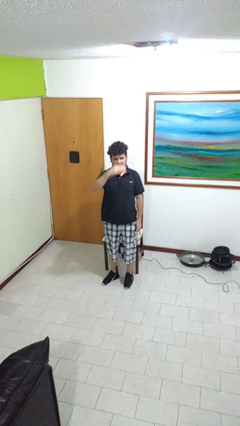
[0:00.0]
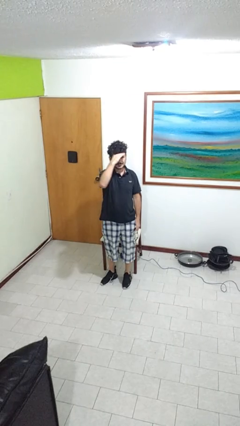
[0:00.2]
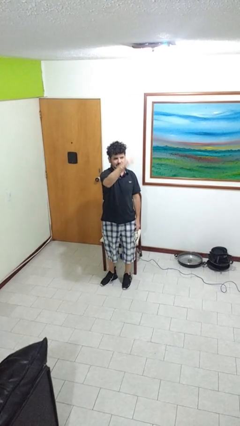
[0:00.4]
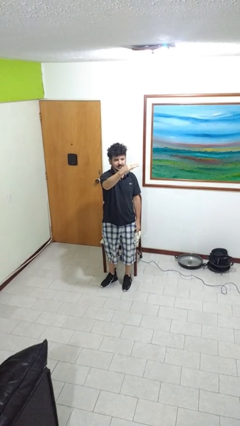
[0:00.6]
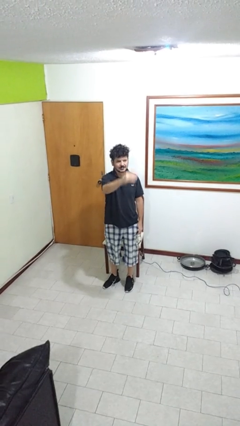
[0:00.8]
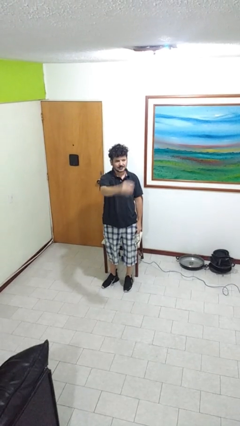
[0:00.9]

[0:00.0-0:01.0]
person salutes

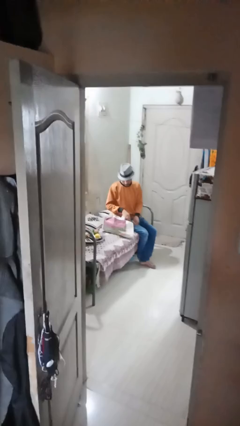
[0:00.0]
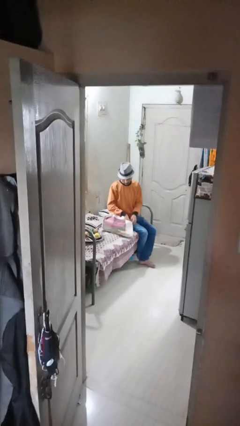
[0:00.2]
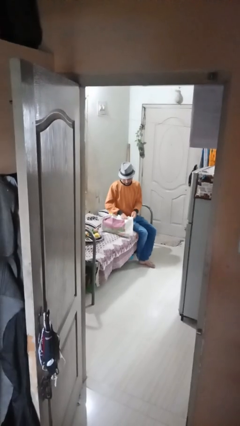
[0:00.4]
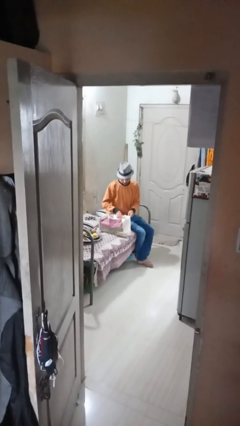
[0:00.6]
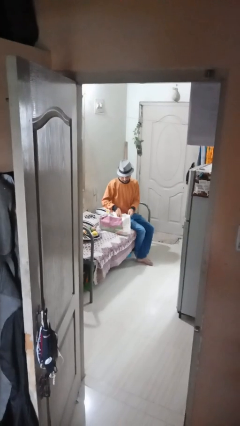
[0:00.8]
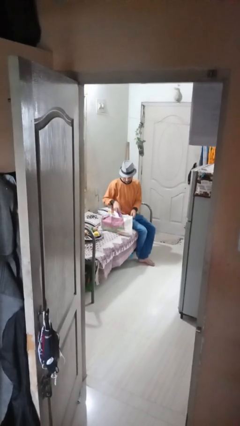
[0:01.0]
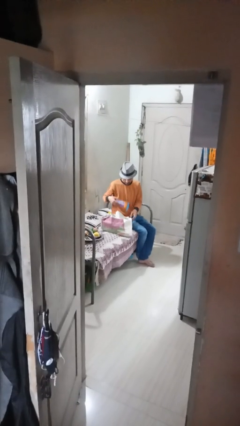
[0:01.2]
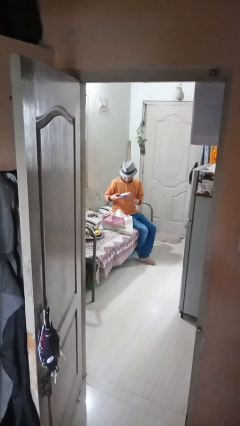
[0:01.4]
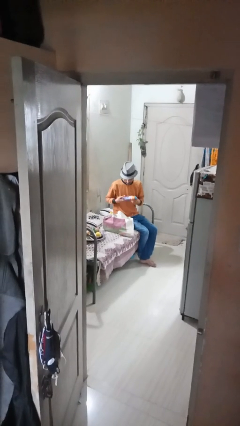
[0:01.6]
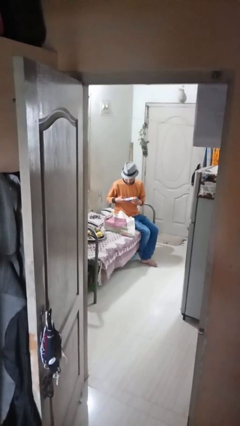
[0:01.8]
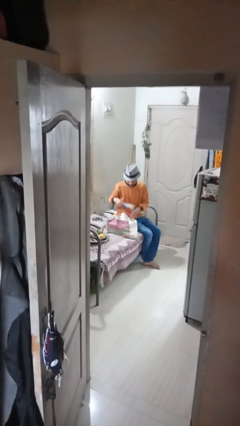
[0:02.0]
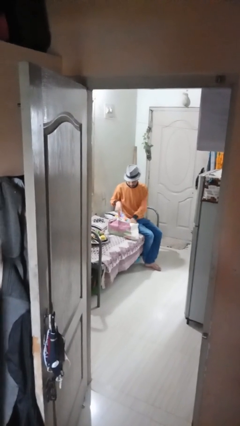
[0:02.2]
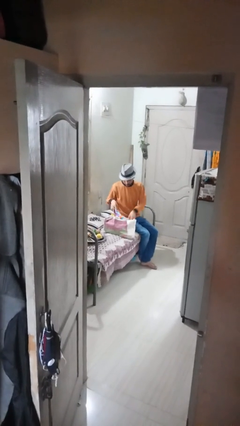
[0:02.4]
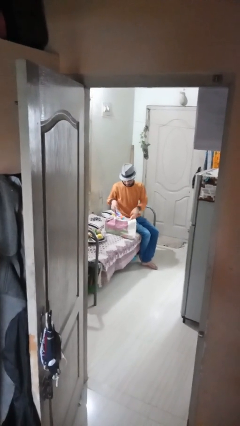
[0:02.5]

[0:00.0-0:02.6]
person searches in bag

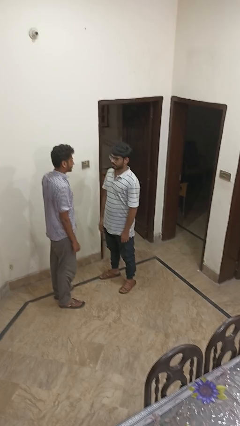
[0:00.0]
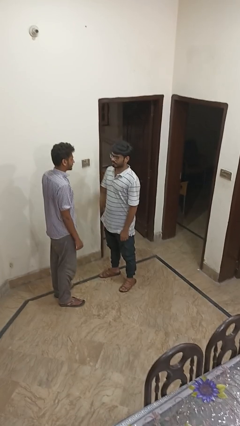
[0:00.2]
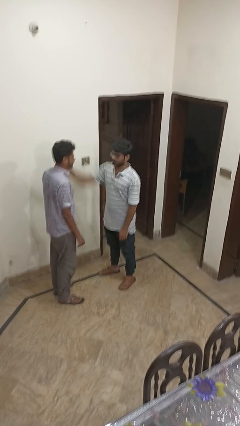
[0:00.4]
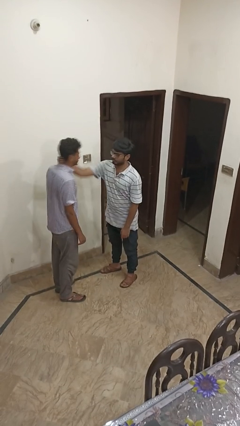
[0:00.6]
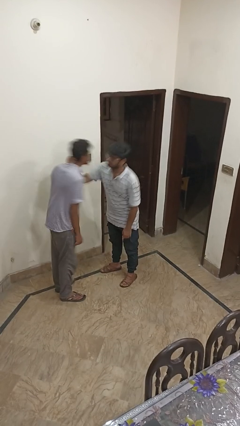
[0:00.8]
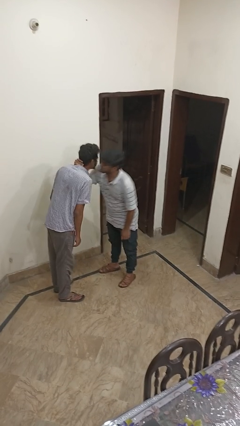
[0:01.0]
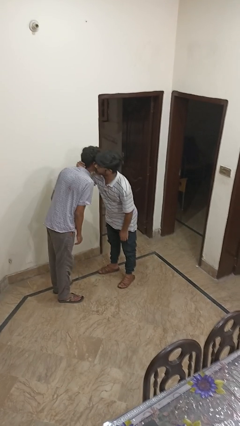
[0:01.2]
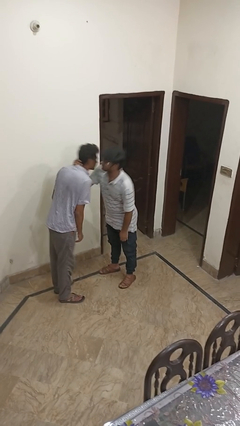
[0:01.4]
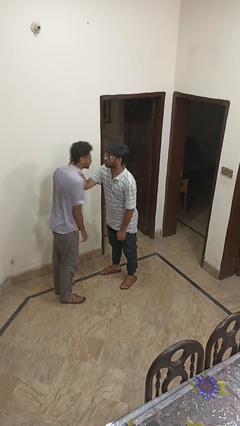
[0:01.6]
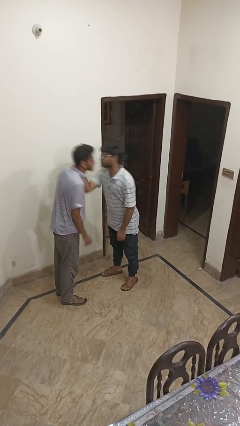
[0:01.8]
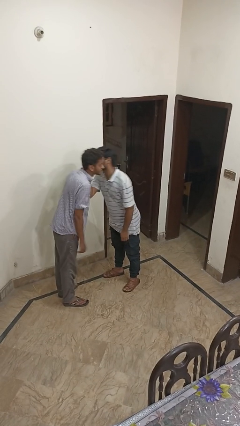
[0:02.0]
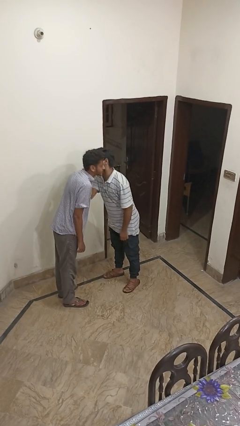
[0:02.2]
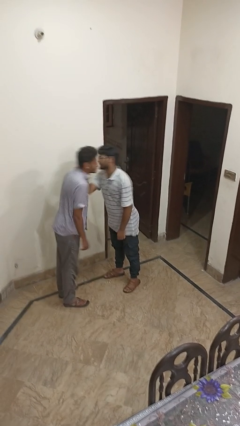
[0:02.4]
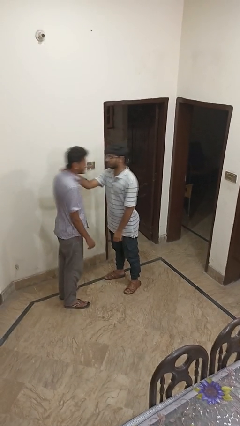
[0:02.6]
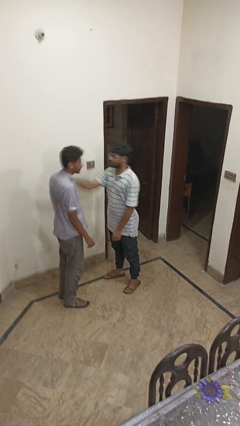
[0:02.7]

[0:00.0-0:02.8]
person kisses cheek of person

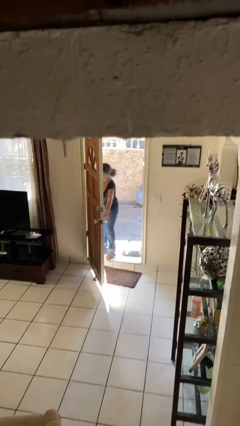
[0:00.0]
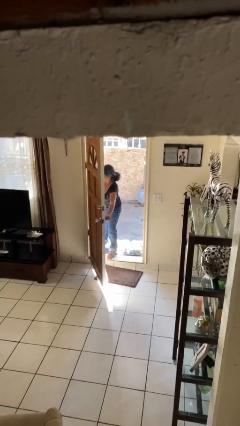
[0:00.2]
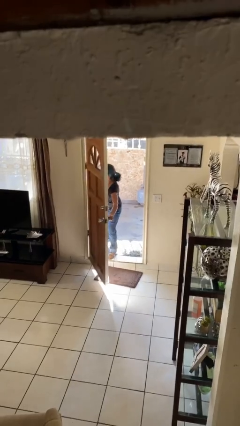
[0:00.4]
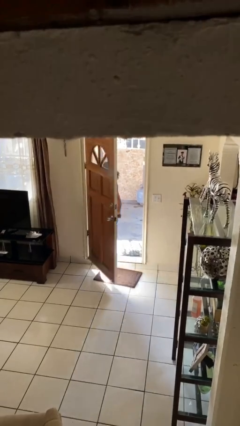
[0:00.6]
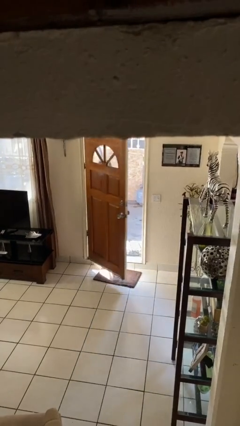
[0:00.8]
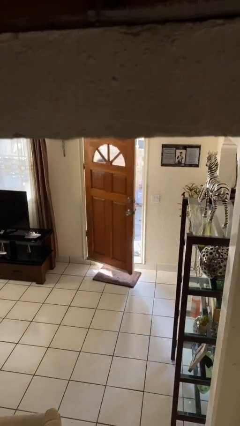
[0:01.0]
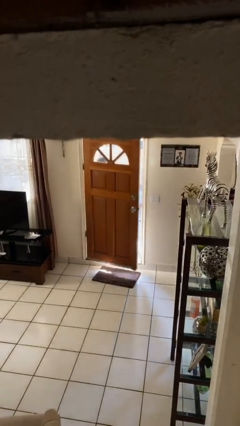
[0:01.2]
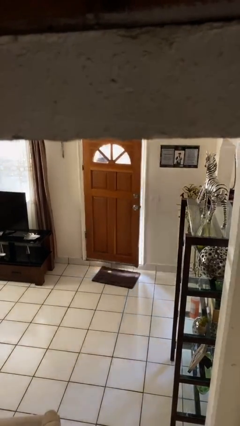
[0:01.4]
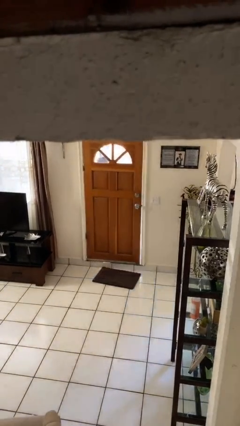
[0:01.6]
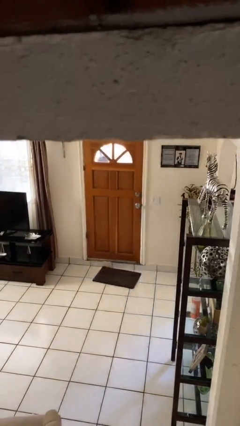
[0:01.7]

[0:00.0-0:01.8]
person closes facility door

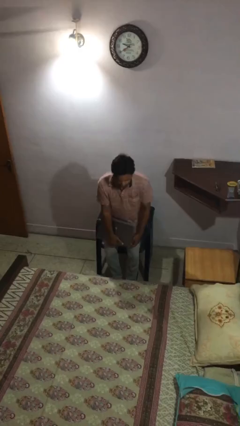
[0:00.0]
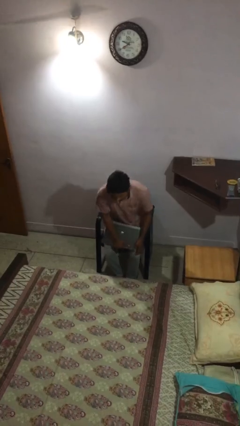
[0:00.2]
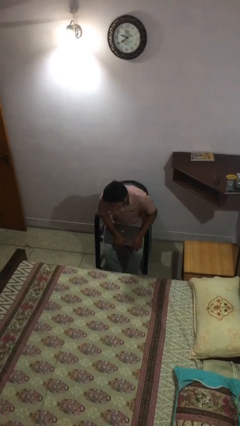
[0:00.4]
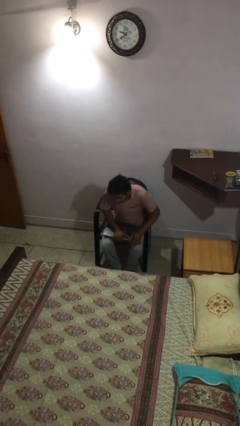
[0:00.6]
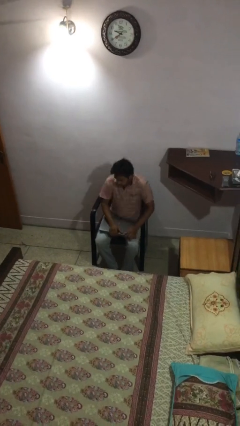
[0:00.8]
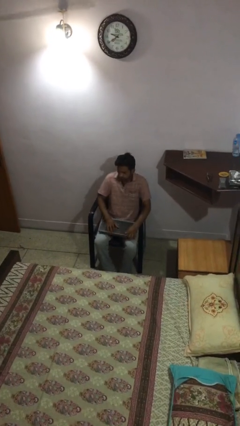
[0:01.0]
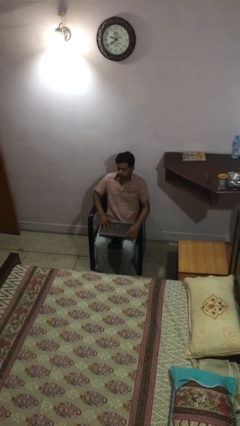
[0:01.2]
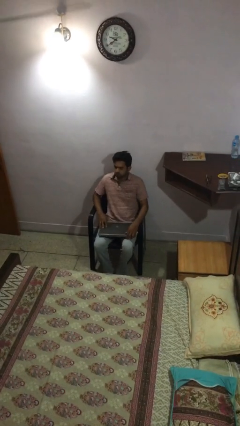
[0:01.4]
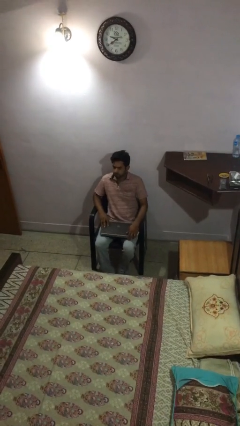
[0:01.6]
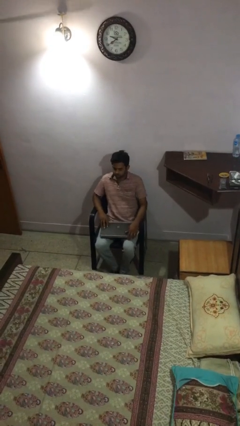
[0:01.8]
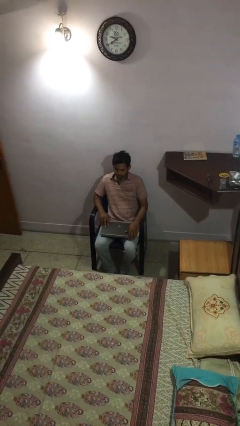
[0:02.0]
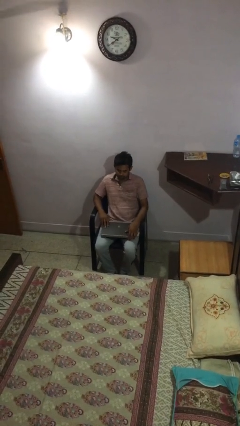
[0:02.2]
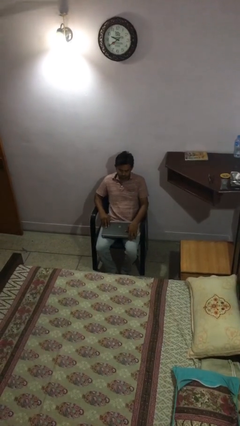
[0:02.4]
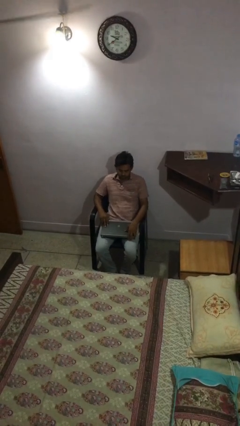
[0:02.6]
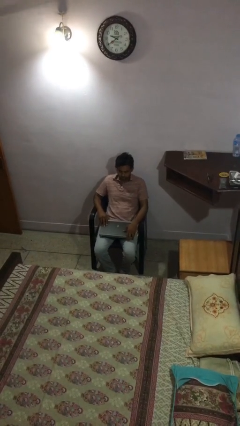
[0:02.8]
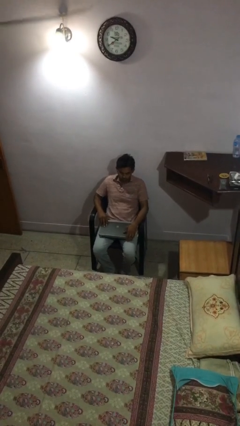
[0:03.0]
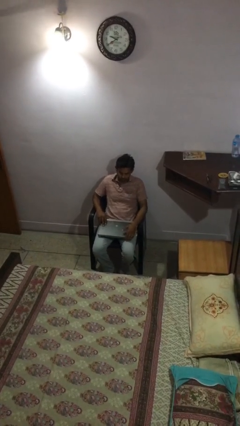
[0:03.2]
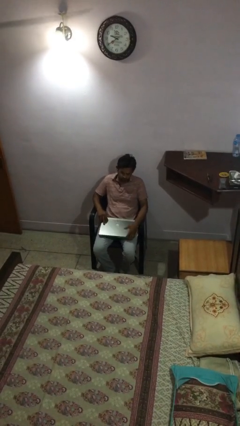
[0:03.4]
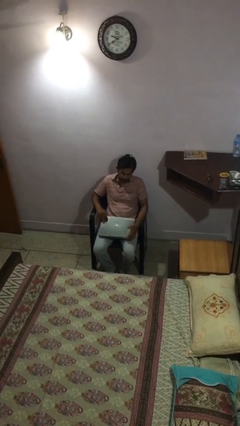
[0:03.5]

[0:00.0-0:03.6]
person sits down

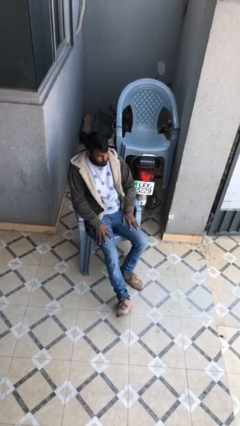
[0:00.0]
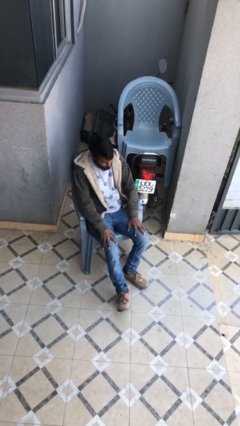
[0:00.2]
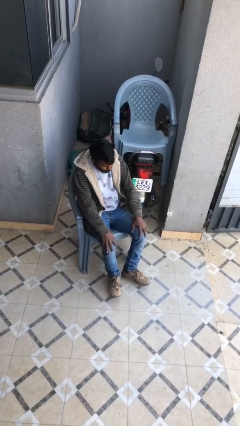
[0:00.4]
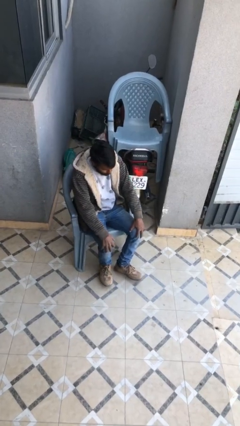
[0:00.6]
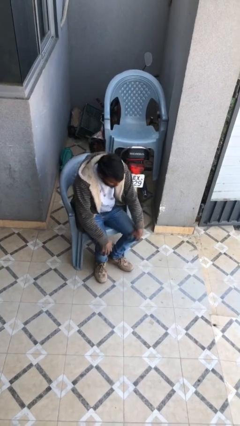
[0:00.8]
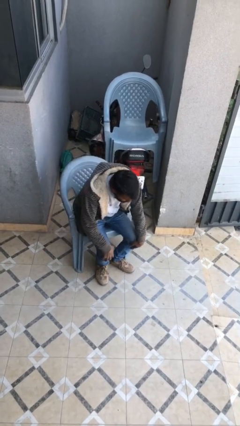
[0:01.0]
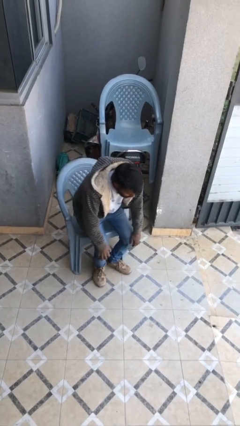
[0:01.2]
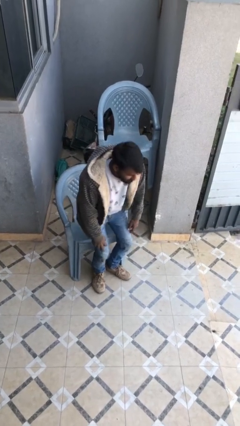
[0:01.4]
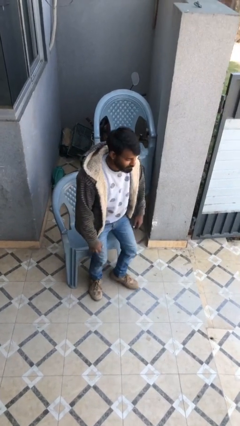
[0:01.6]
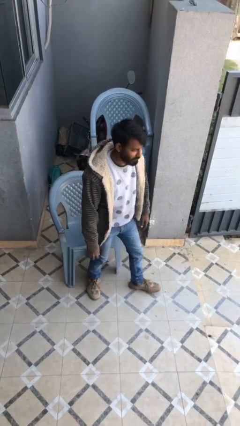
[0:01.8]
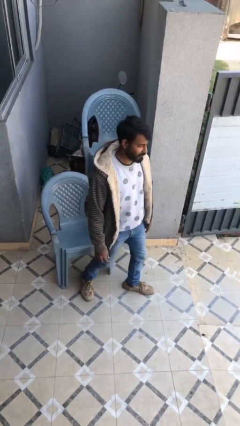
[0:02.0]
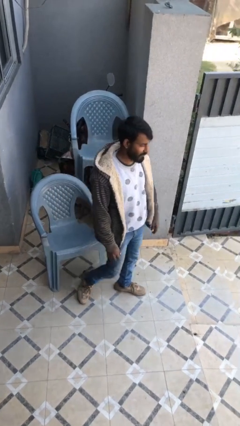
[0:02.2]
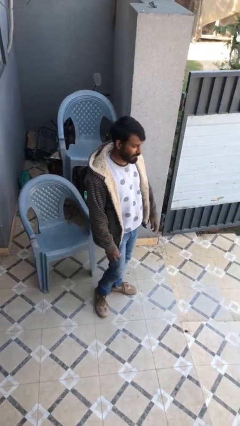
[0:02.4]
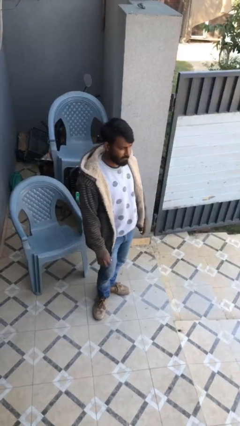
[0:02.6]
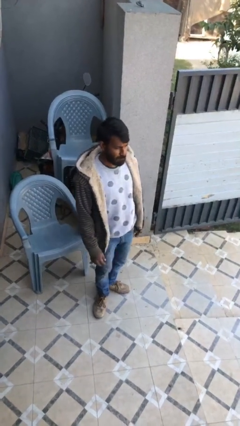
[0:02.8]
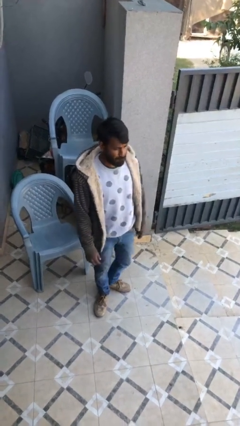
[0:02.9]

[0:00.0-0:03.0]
person stands up

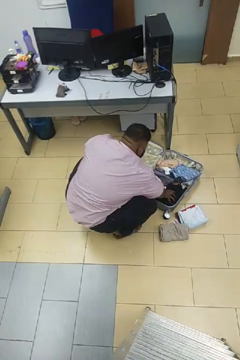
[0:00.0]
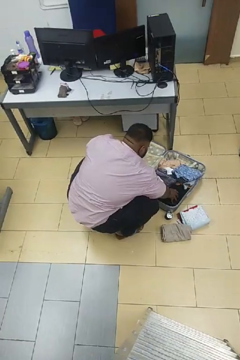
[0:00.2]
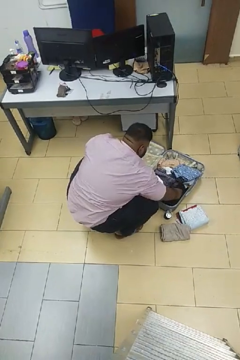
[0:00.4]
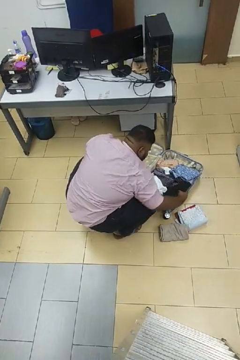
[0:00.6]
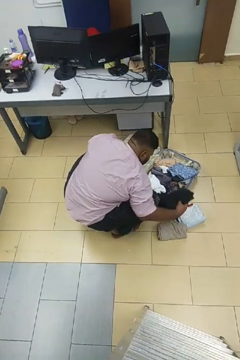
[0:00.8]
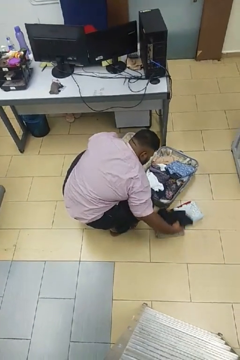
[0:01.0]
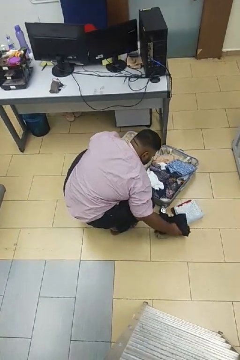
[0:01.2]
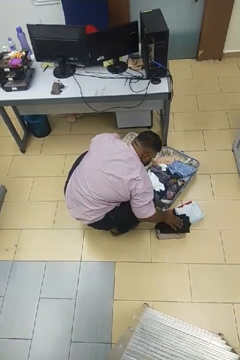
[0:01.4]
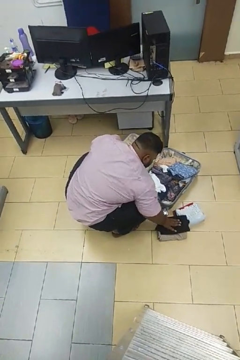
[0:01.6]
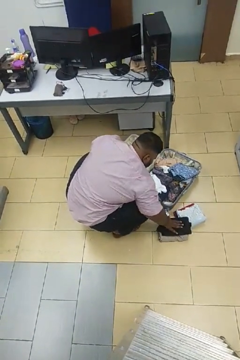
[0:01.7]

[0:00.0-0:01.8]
person unloads clothes from suitcase

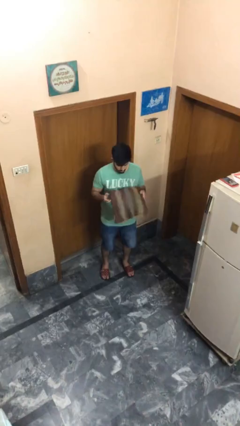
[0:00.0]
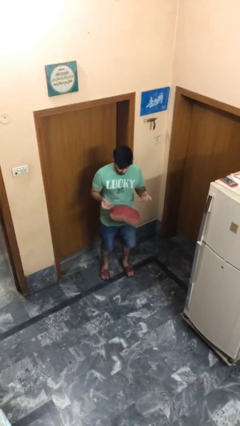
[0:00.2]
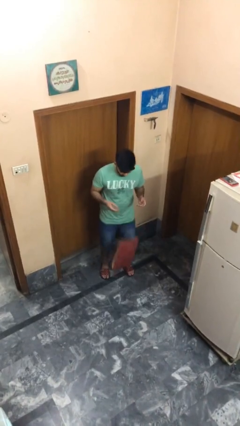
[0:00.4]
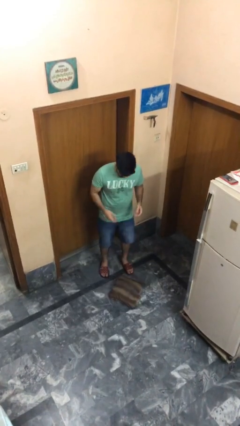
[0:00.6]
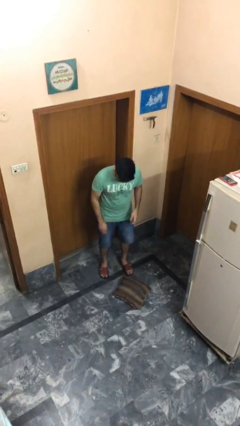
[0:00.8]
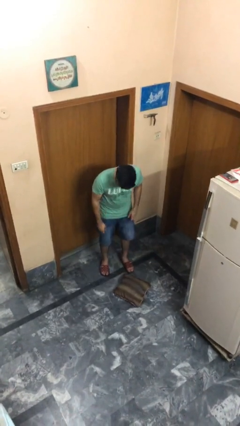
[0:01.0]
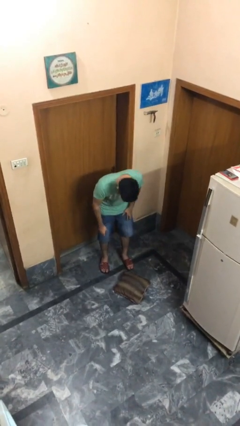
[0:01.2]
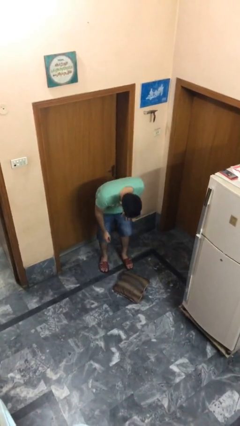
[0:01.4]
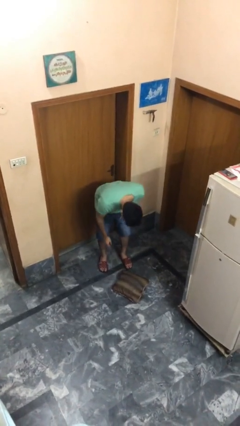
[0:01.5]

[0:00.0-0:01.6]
person drops object
